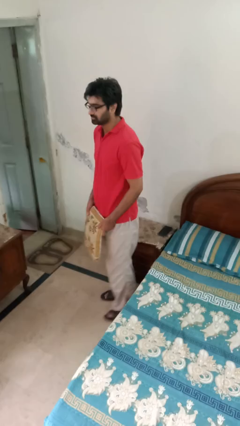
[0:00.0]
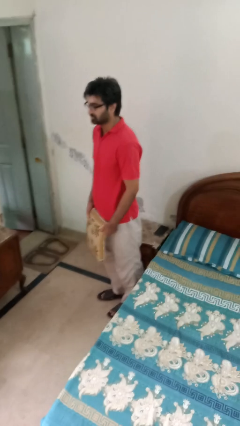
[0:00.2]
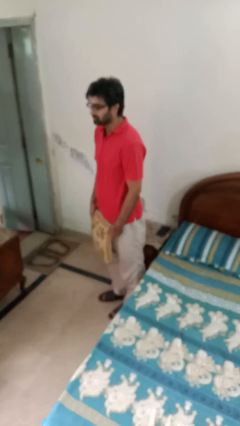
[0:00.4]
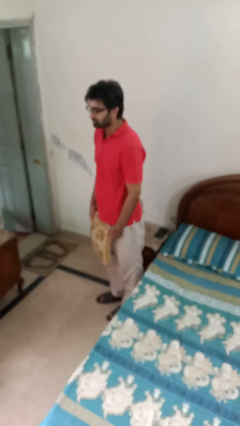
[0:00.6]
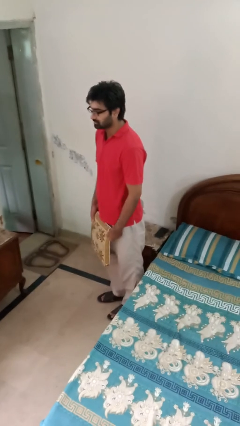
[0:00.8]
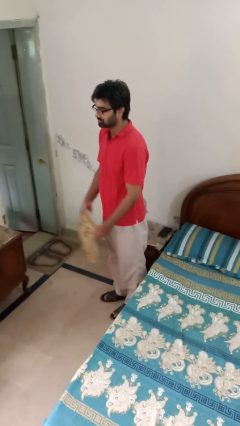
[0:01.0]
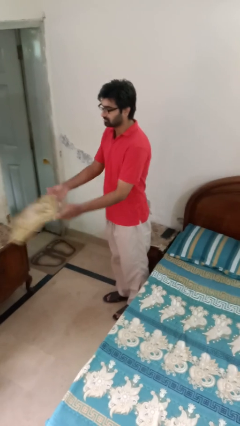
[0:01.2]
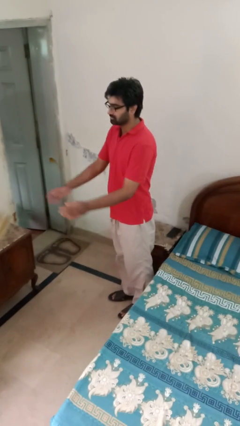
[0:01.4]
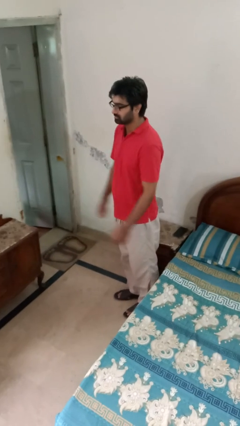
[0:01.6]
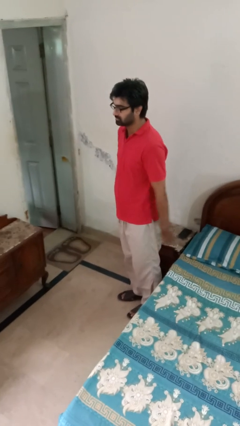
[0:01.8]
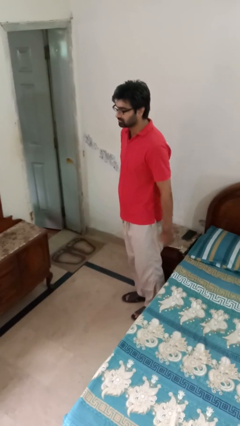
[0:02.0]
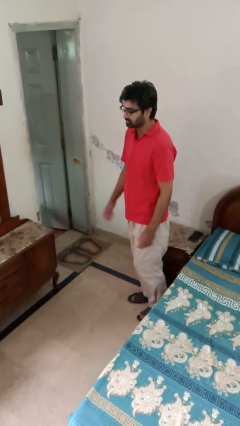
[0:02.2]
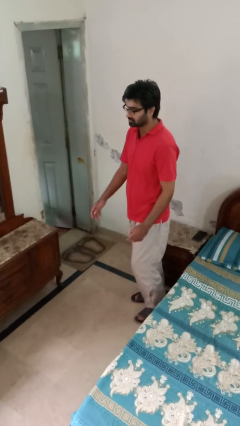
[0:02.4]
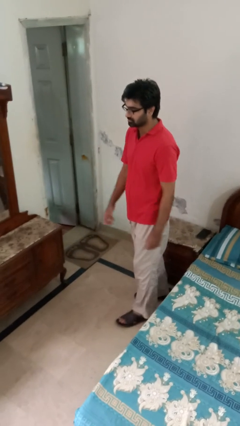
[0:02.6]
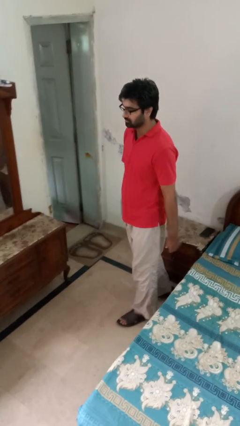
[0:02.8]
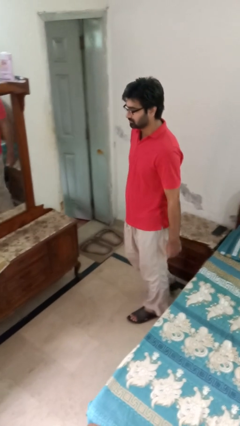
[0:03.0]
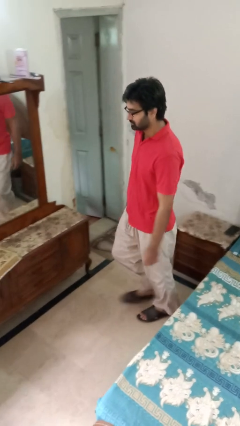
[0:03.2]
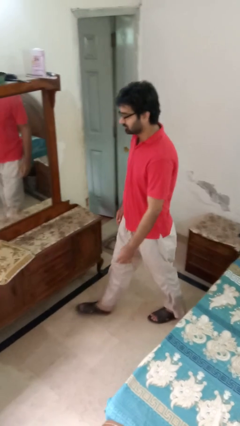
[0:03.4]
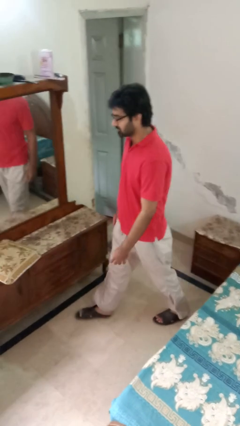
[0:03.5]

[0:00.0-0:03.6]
person throws object on table

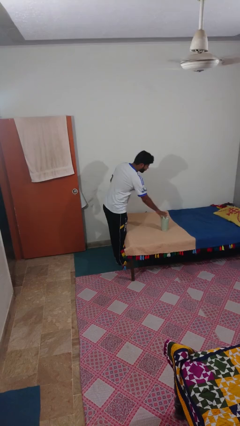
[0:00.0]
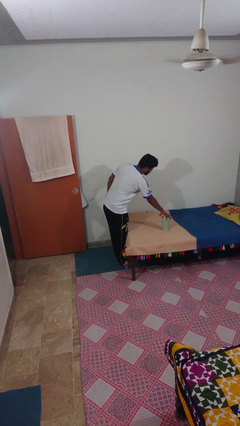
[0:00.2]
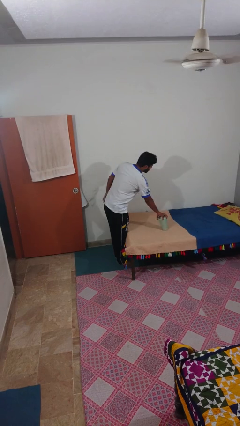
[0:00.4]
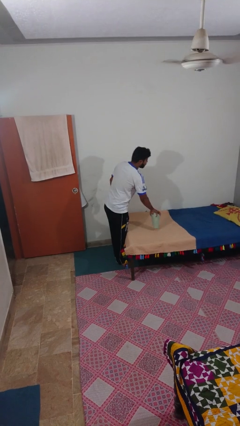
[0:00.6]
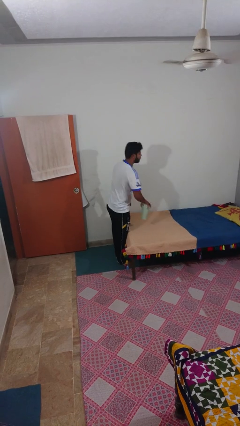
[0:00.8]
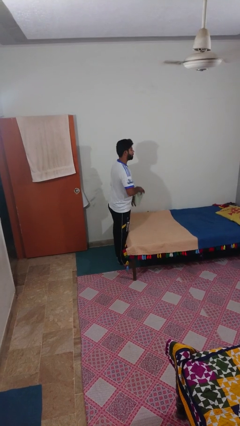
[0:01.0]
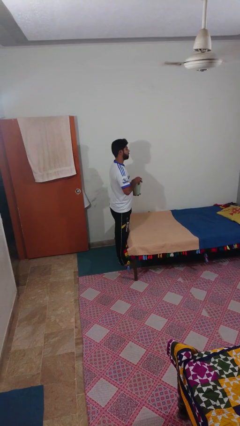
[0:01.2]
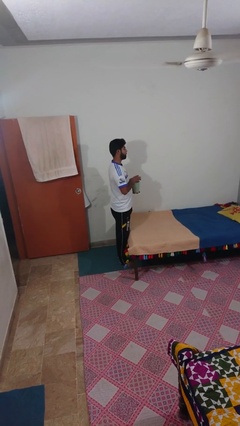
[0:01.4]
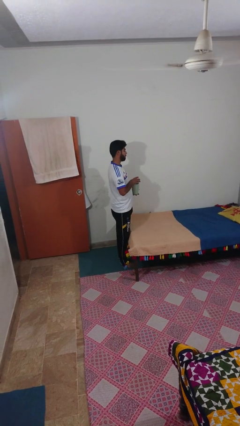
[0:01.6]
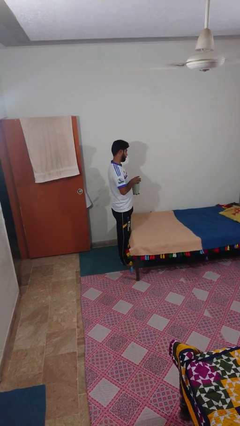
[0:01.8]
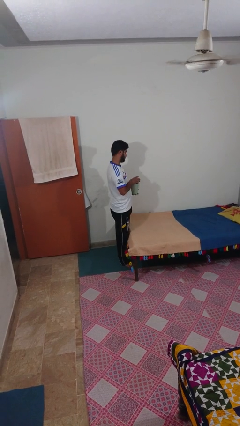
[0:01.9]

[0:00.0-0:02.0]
person picks up object from bed

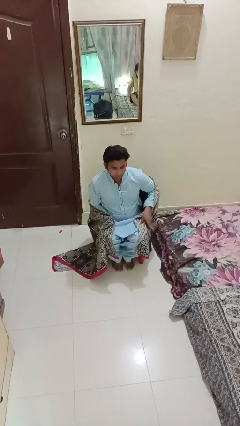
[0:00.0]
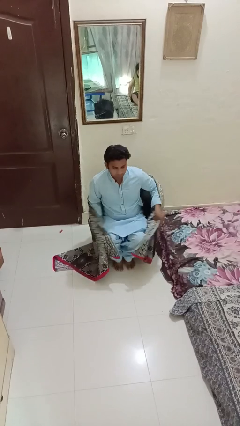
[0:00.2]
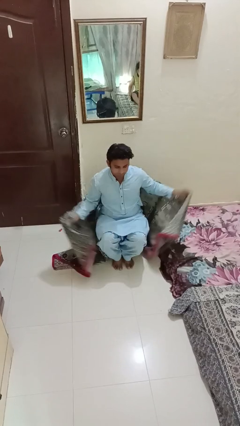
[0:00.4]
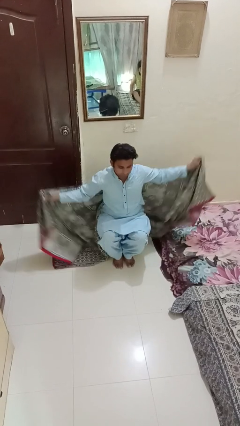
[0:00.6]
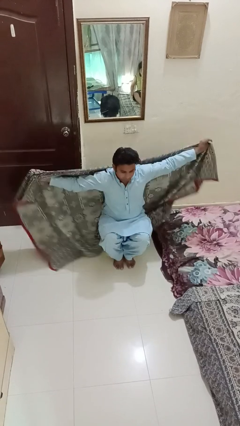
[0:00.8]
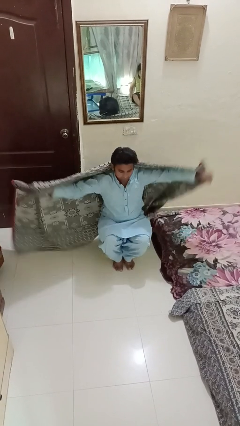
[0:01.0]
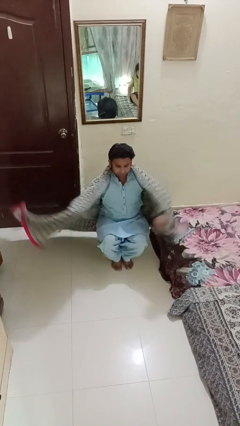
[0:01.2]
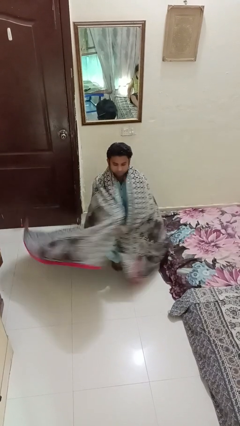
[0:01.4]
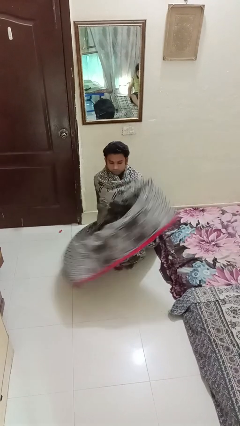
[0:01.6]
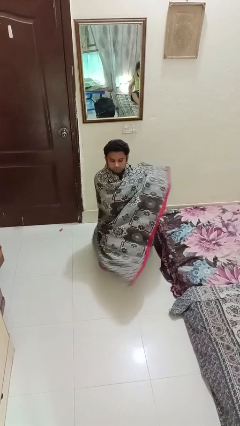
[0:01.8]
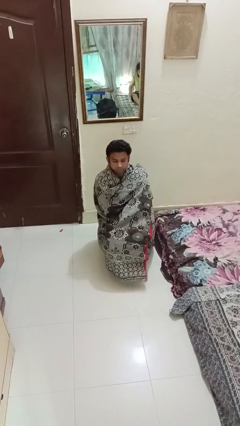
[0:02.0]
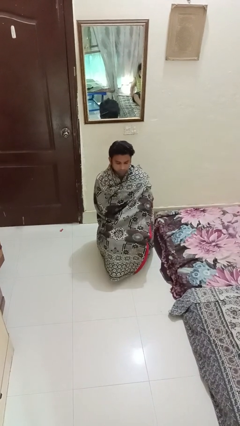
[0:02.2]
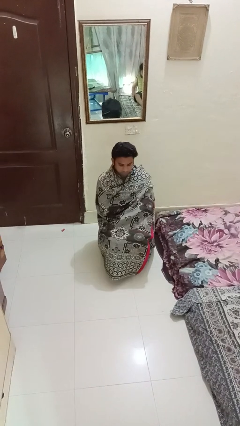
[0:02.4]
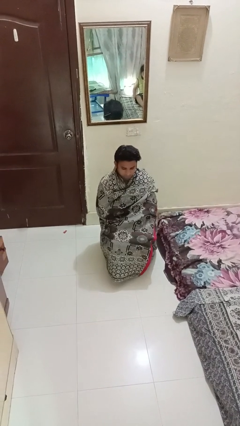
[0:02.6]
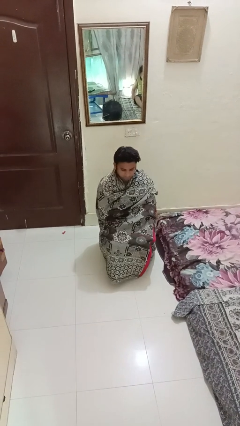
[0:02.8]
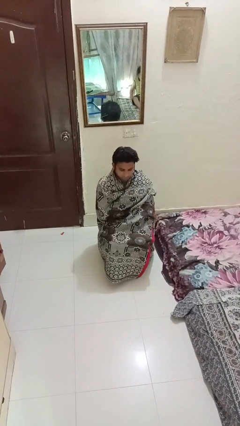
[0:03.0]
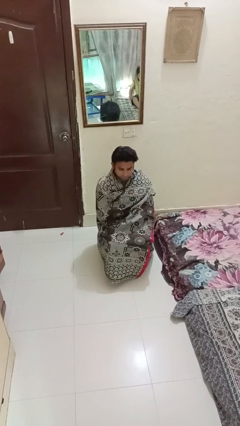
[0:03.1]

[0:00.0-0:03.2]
person covers with blanket

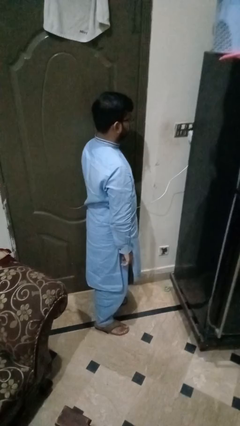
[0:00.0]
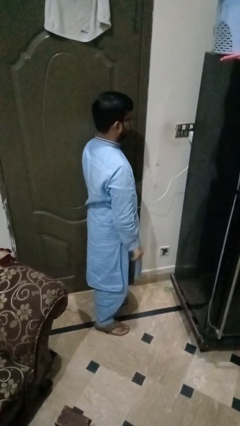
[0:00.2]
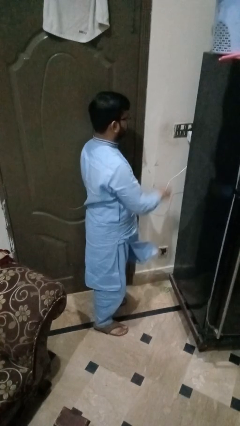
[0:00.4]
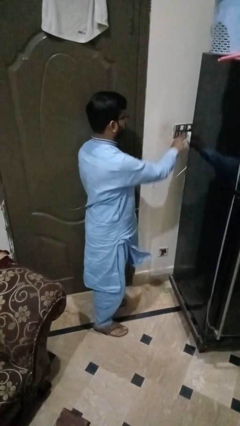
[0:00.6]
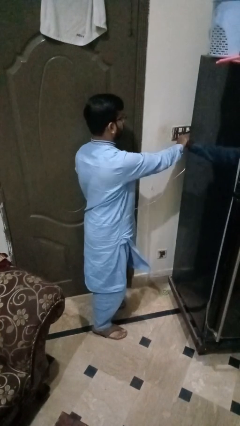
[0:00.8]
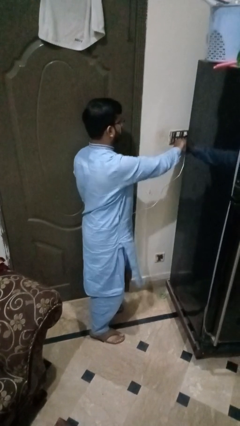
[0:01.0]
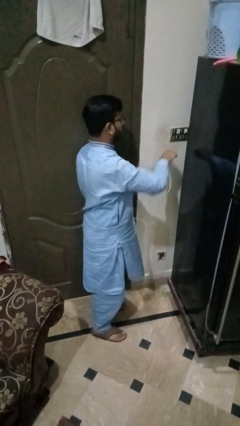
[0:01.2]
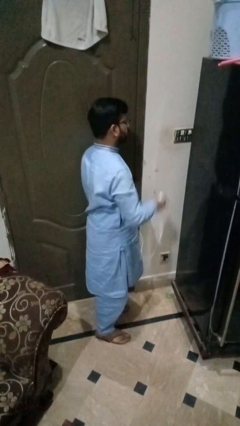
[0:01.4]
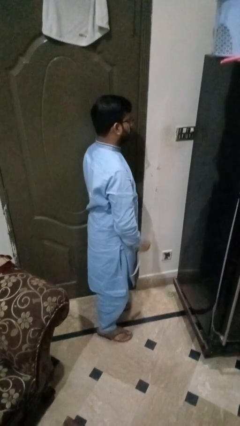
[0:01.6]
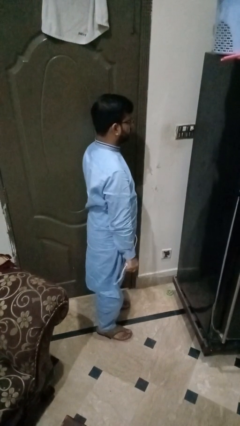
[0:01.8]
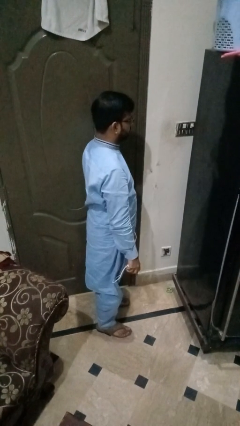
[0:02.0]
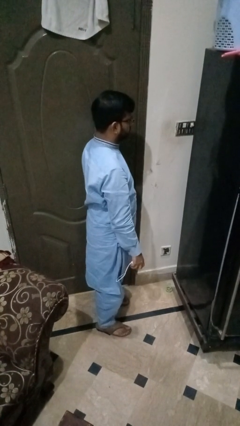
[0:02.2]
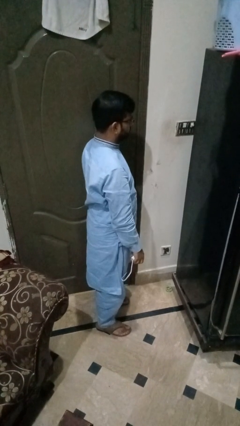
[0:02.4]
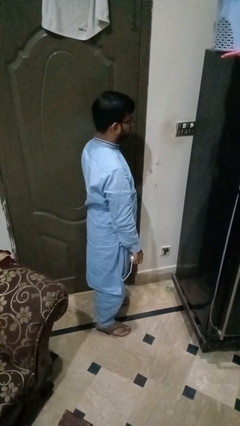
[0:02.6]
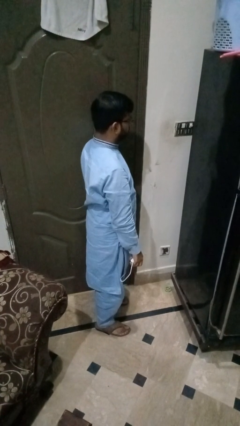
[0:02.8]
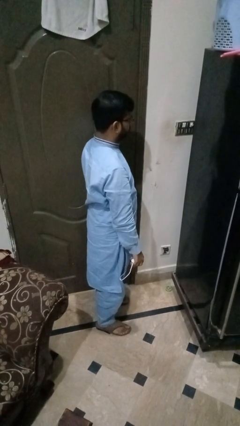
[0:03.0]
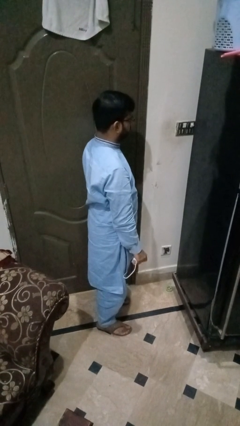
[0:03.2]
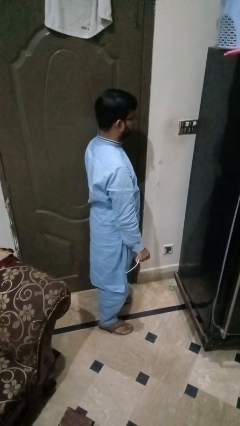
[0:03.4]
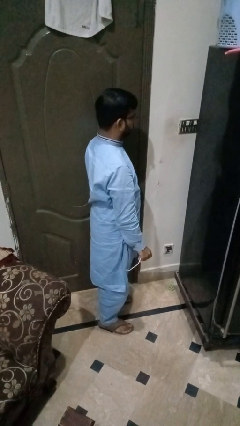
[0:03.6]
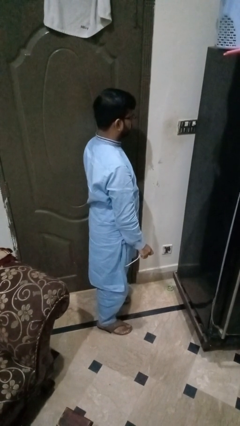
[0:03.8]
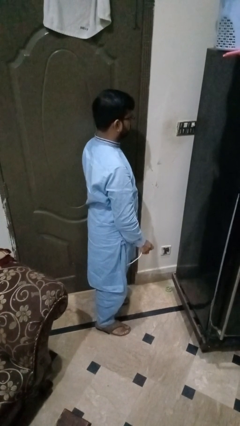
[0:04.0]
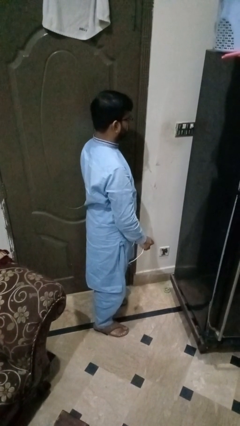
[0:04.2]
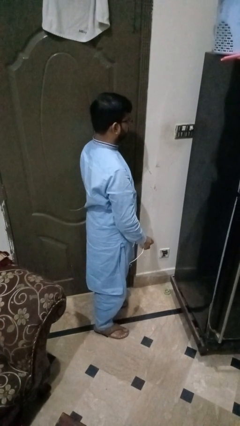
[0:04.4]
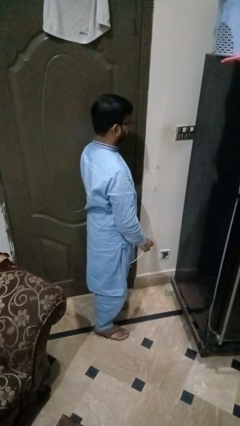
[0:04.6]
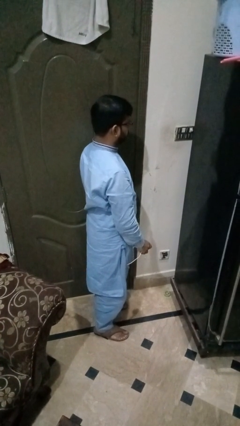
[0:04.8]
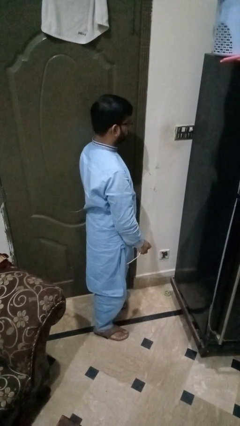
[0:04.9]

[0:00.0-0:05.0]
person unplugs from electrical socket

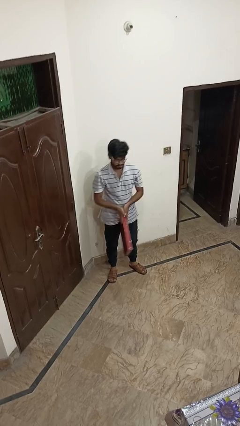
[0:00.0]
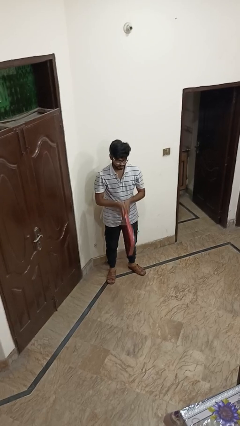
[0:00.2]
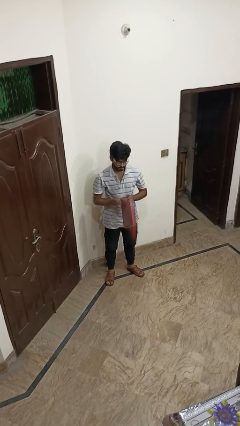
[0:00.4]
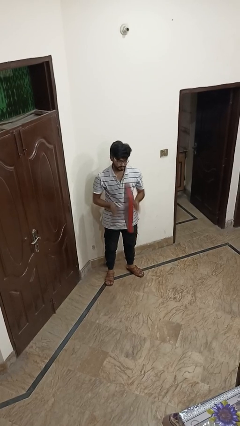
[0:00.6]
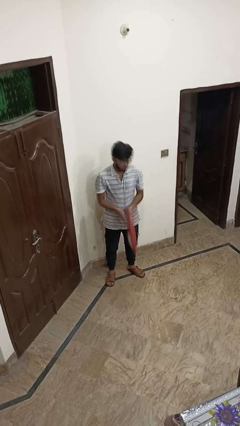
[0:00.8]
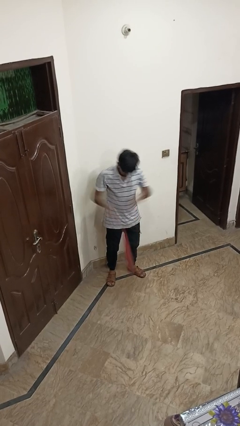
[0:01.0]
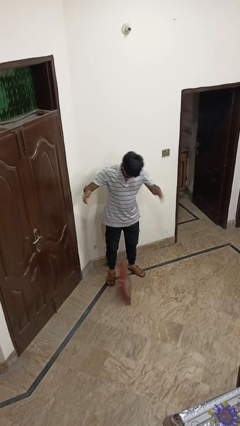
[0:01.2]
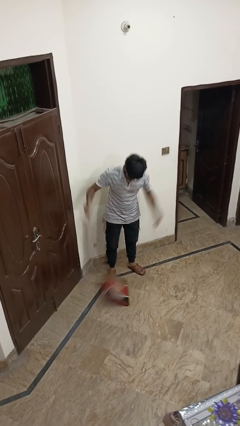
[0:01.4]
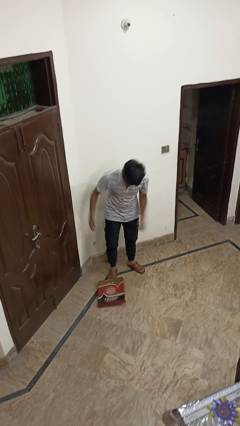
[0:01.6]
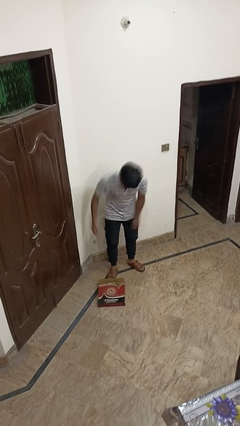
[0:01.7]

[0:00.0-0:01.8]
person drops object

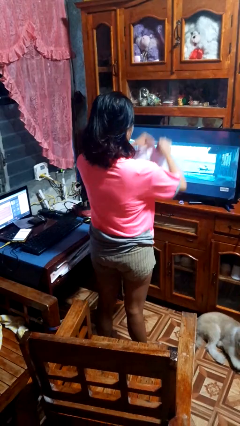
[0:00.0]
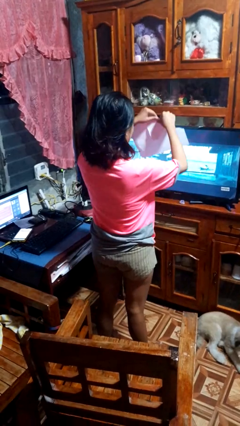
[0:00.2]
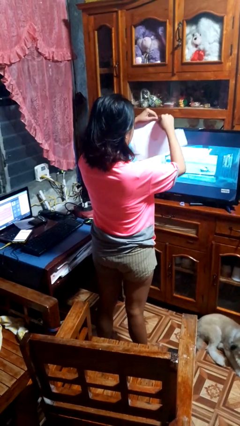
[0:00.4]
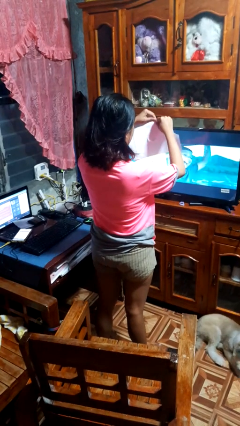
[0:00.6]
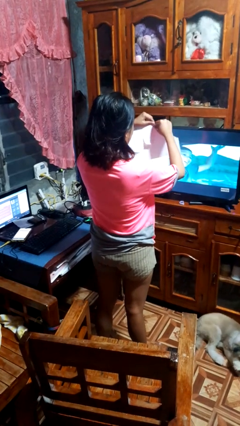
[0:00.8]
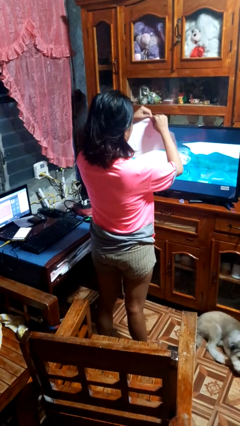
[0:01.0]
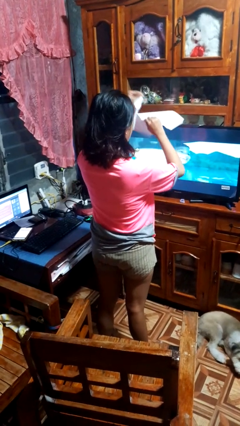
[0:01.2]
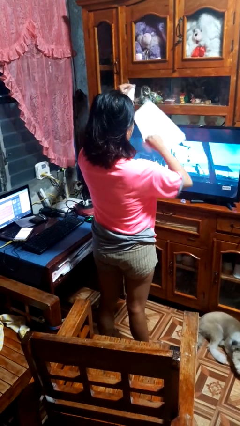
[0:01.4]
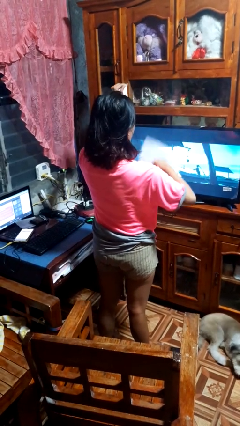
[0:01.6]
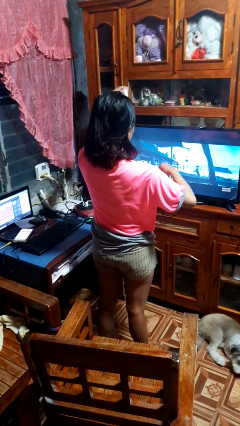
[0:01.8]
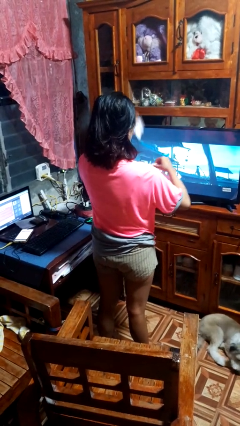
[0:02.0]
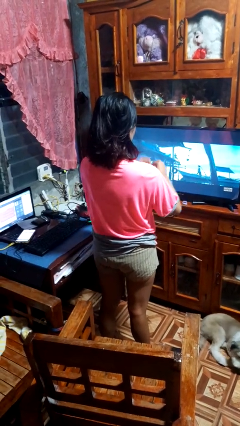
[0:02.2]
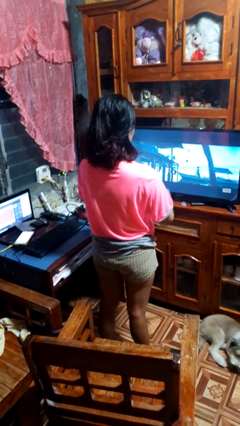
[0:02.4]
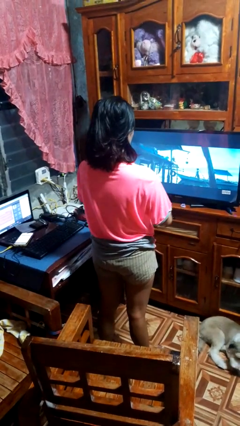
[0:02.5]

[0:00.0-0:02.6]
person tears paper
